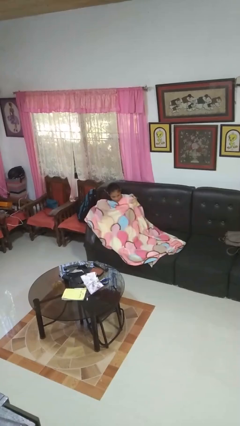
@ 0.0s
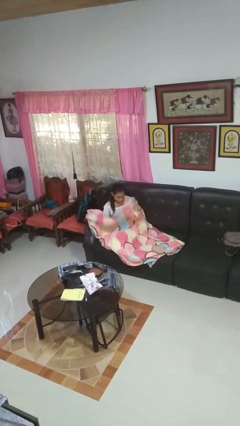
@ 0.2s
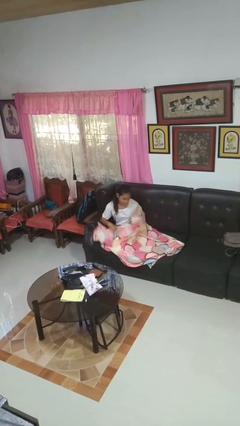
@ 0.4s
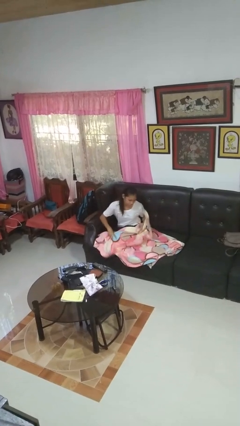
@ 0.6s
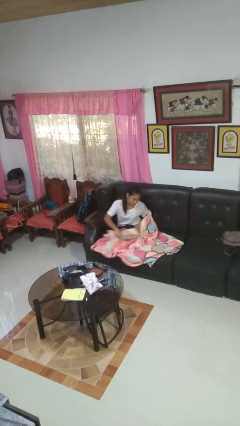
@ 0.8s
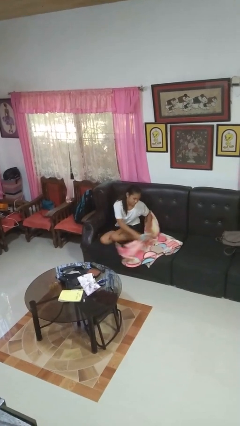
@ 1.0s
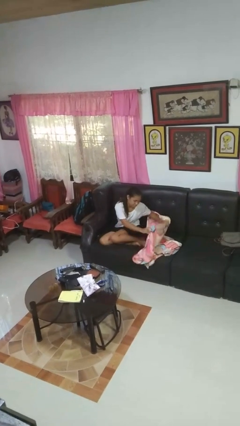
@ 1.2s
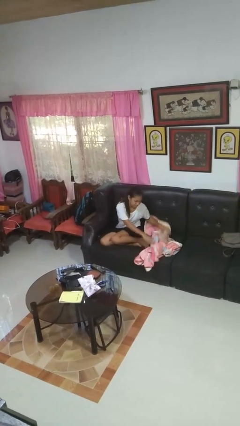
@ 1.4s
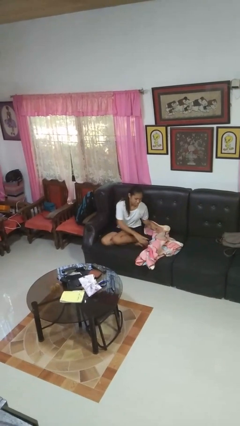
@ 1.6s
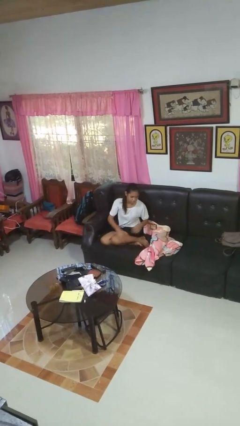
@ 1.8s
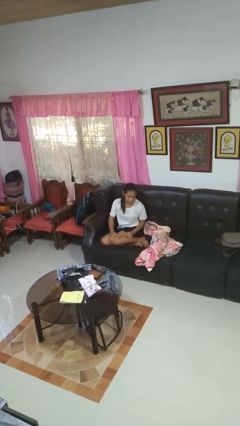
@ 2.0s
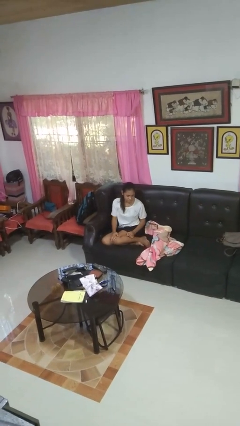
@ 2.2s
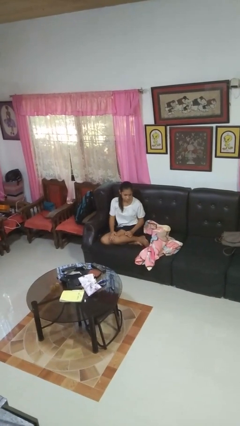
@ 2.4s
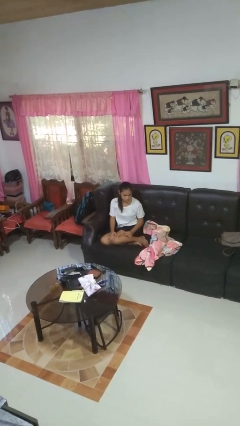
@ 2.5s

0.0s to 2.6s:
person uncovers with blanket

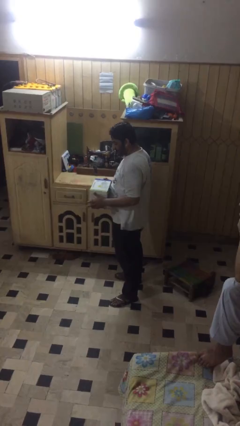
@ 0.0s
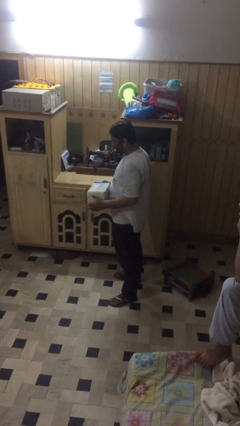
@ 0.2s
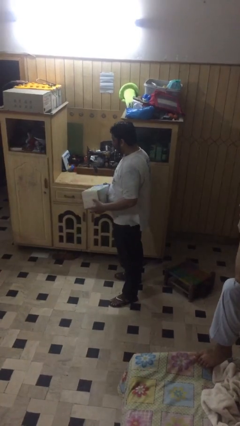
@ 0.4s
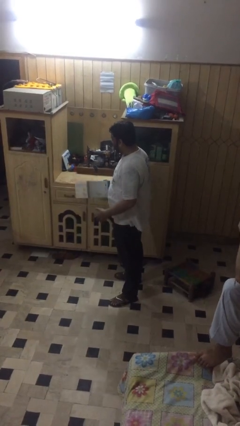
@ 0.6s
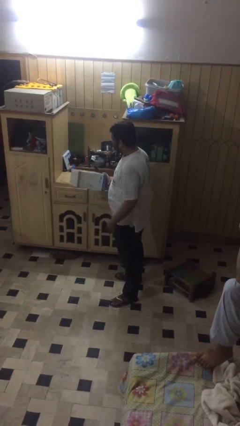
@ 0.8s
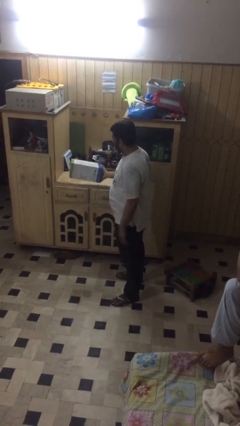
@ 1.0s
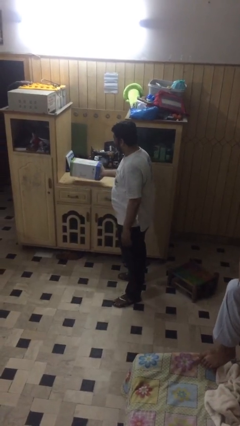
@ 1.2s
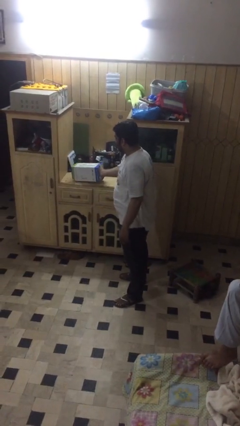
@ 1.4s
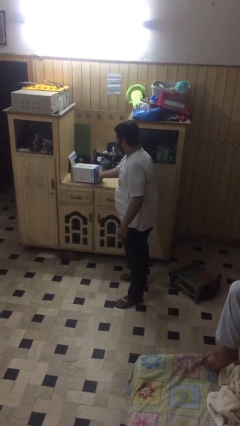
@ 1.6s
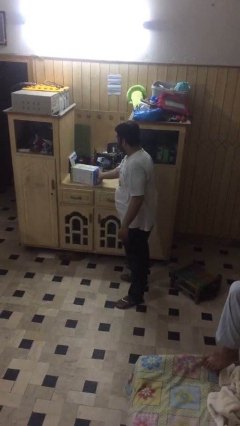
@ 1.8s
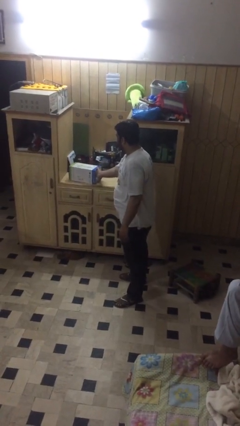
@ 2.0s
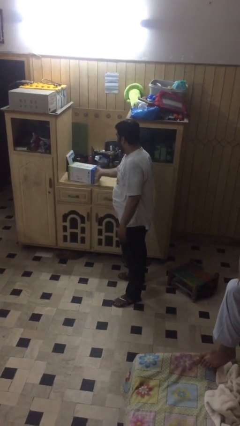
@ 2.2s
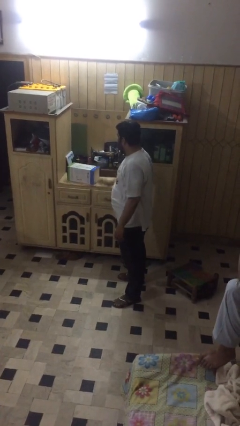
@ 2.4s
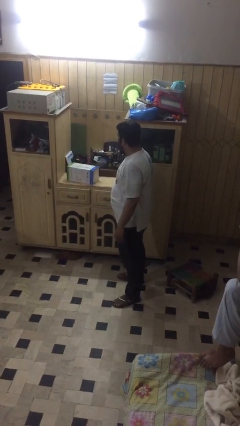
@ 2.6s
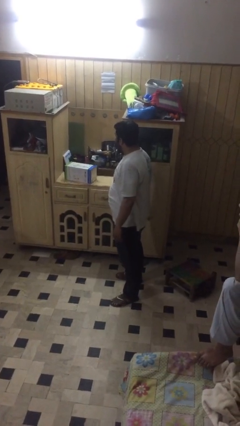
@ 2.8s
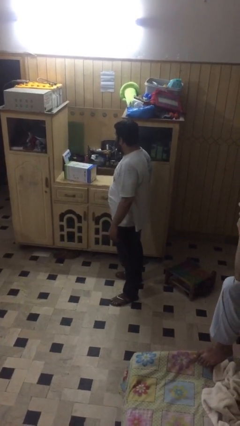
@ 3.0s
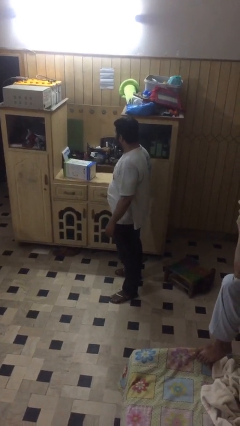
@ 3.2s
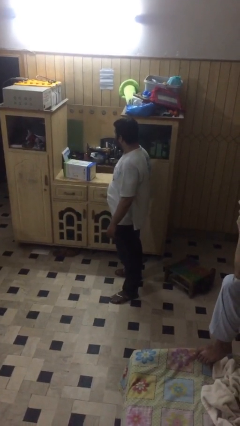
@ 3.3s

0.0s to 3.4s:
person puts down object on table

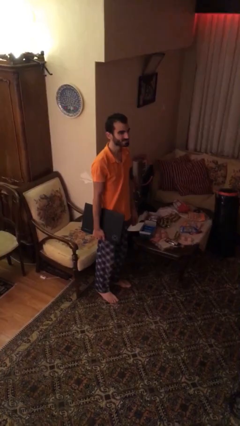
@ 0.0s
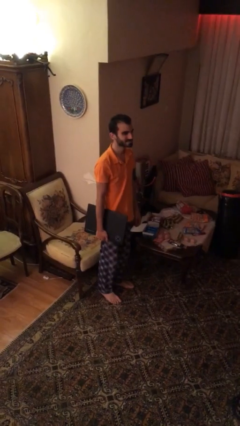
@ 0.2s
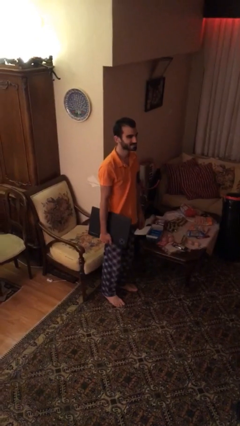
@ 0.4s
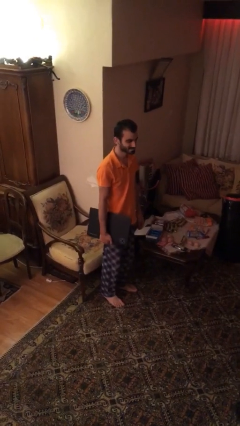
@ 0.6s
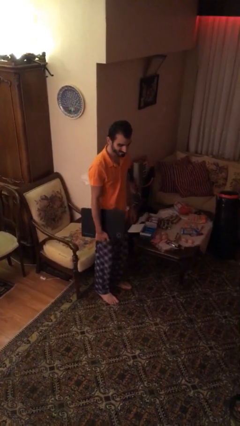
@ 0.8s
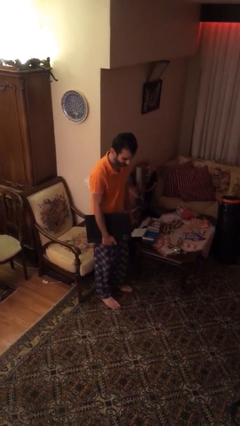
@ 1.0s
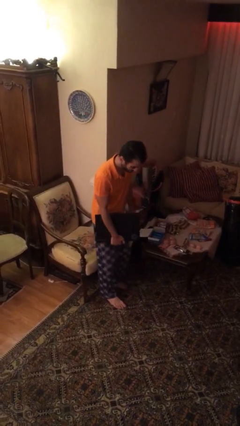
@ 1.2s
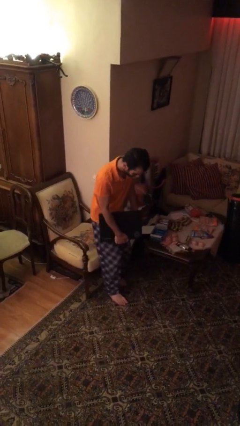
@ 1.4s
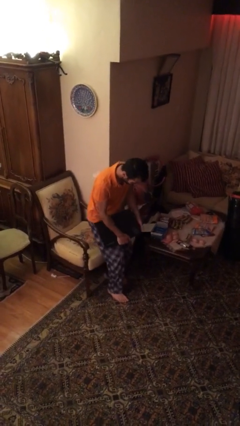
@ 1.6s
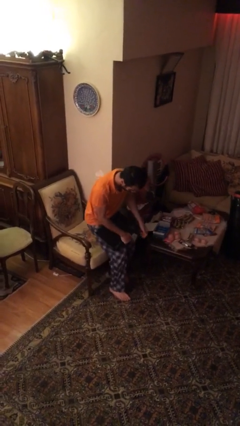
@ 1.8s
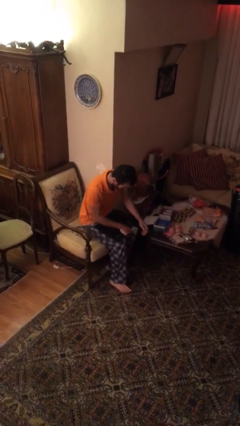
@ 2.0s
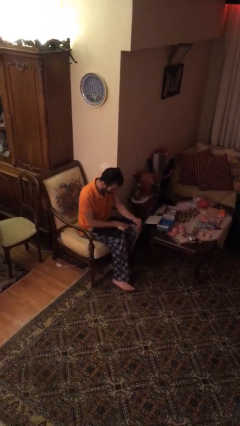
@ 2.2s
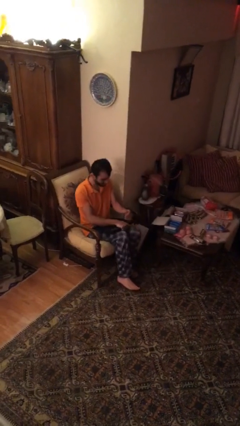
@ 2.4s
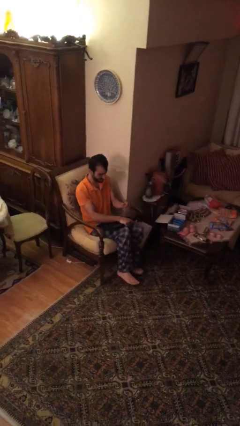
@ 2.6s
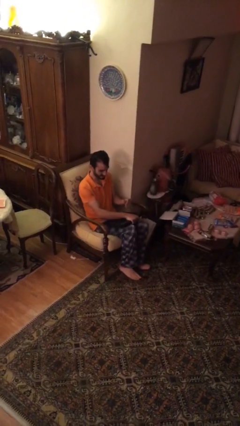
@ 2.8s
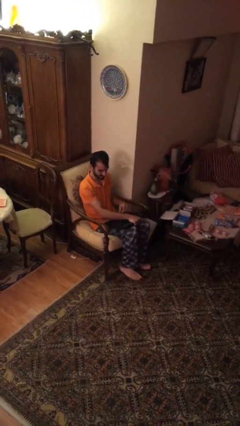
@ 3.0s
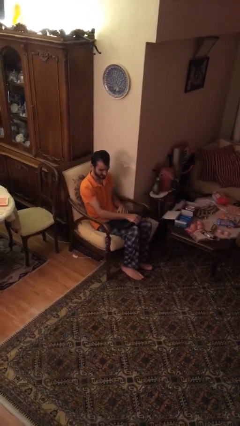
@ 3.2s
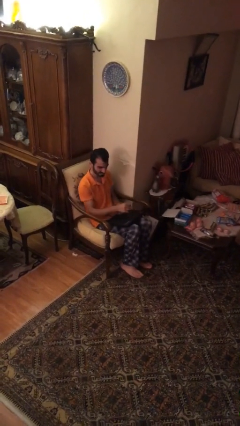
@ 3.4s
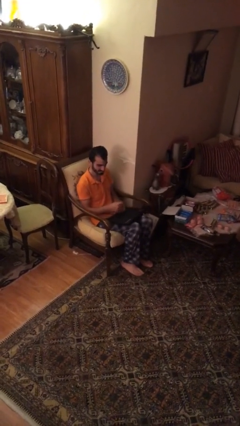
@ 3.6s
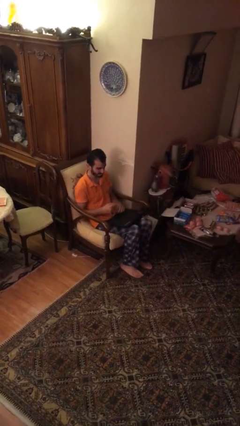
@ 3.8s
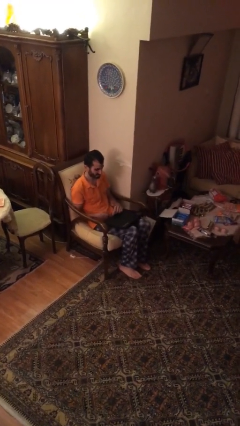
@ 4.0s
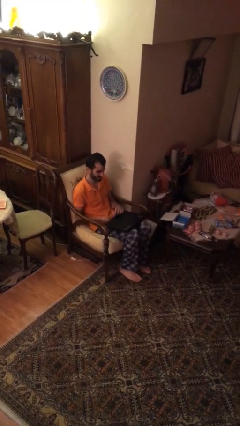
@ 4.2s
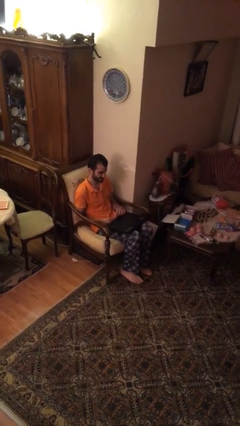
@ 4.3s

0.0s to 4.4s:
person sits down

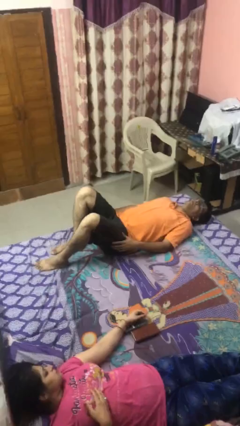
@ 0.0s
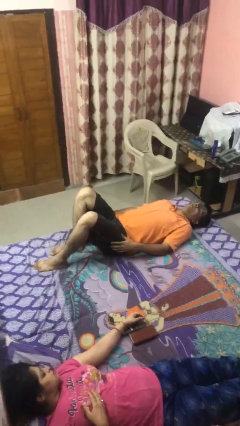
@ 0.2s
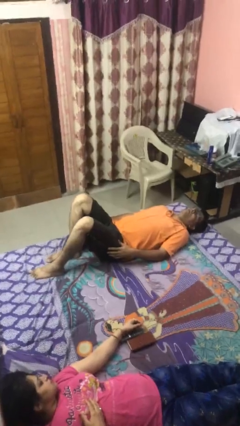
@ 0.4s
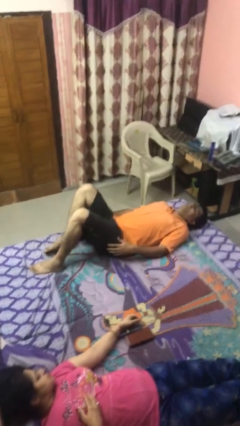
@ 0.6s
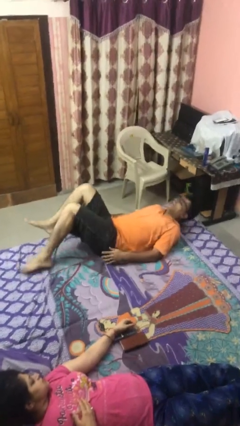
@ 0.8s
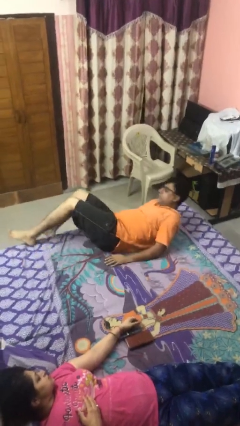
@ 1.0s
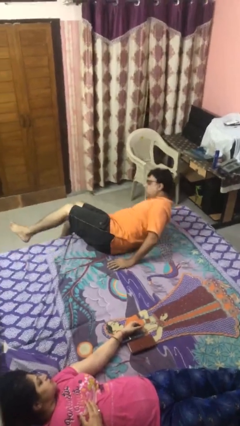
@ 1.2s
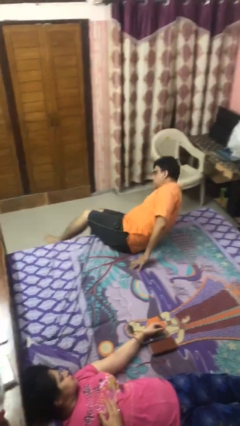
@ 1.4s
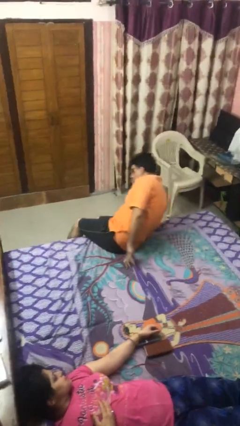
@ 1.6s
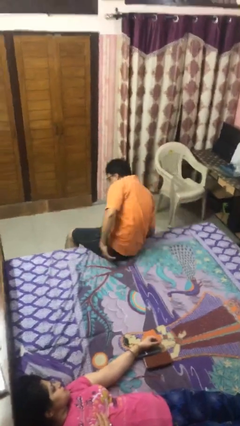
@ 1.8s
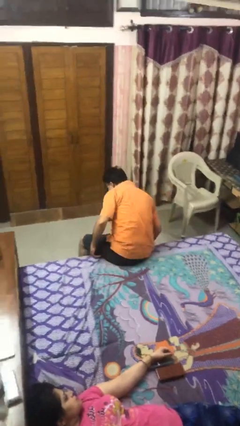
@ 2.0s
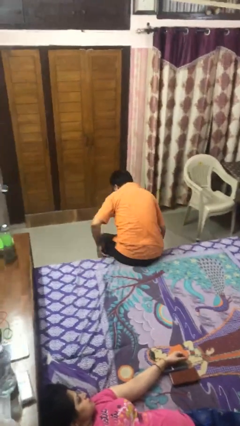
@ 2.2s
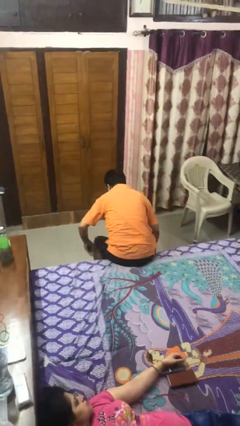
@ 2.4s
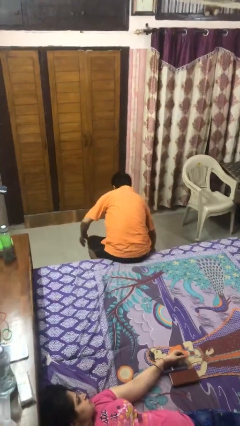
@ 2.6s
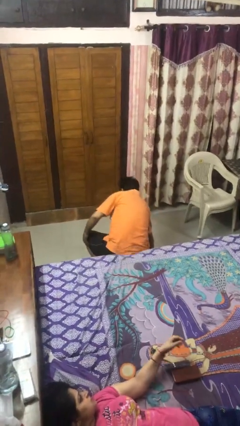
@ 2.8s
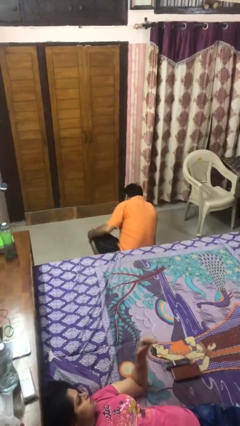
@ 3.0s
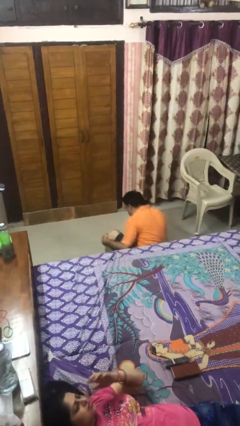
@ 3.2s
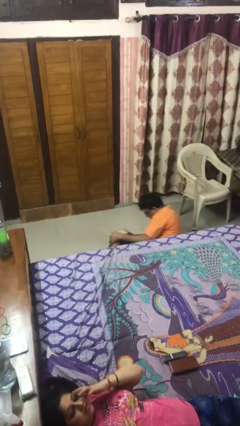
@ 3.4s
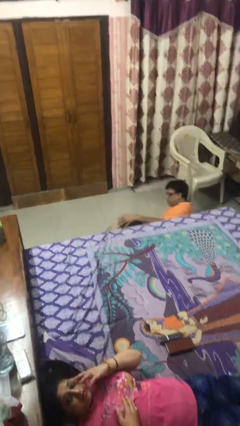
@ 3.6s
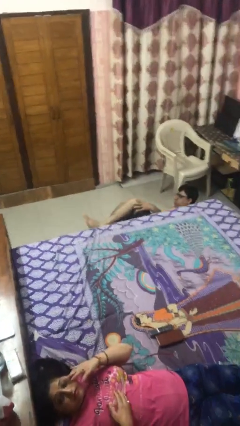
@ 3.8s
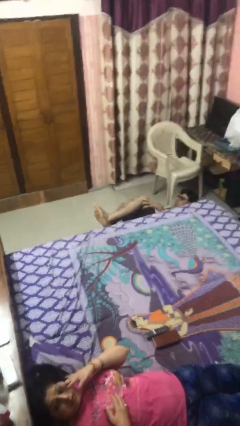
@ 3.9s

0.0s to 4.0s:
person falls from bed

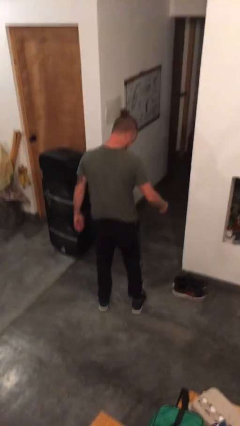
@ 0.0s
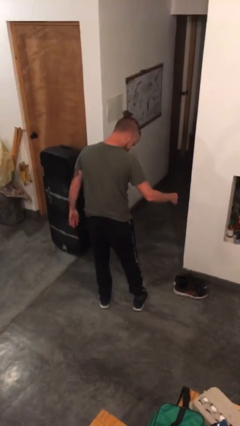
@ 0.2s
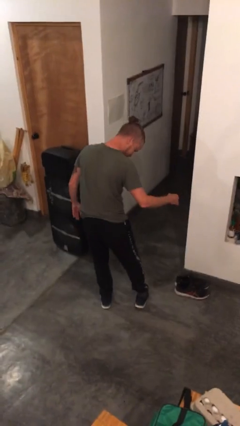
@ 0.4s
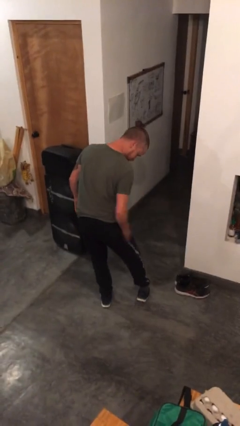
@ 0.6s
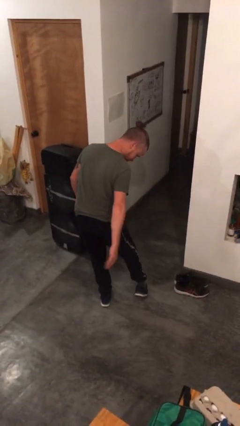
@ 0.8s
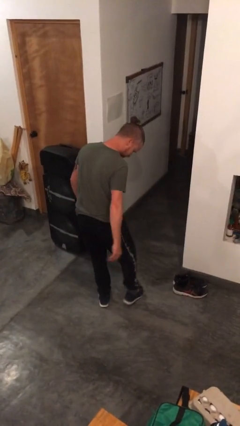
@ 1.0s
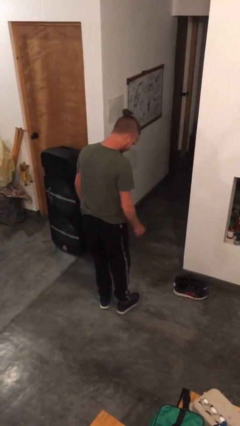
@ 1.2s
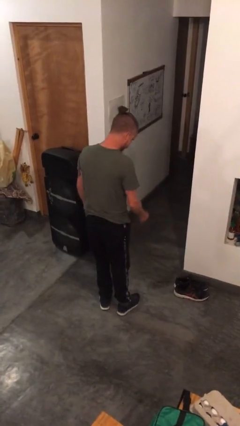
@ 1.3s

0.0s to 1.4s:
person swats bug

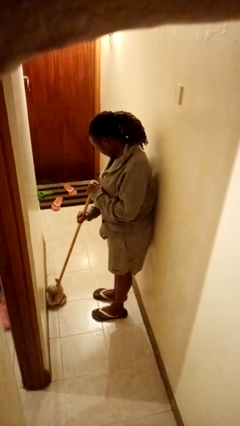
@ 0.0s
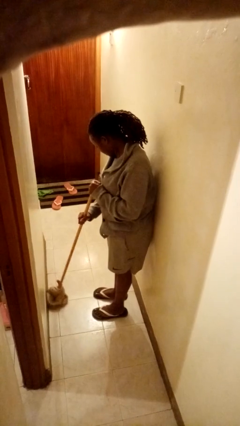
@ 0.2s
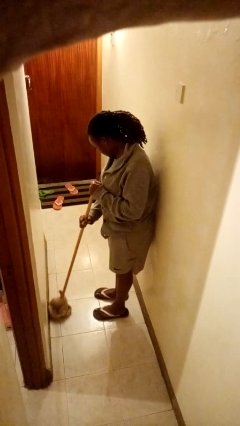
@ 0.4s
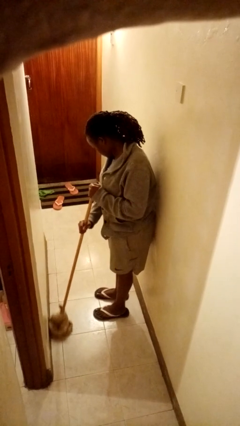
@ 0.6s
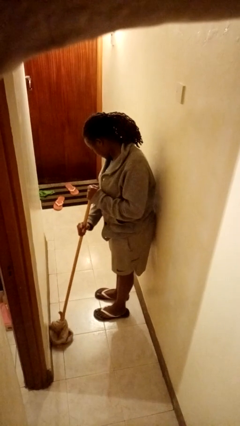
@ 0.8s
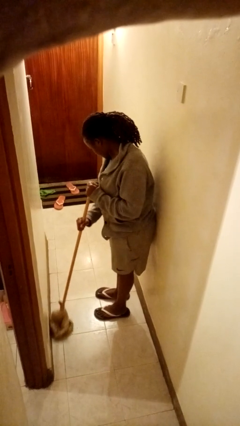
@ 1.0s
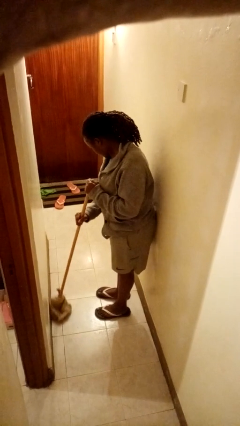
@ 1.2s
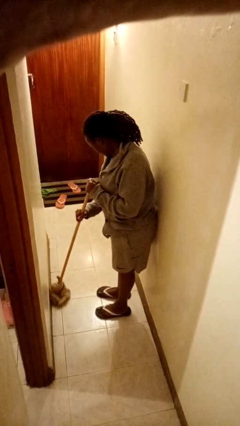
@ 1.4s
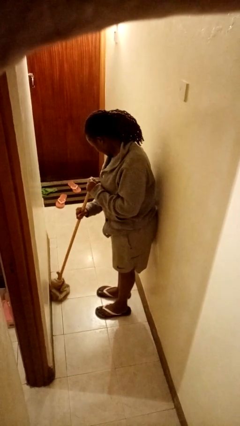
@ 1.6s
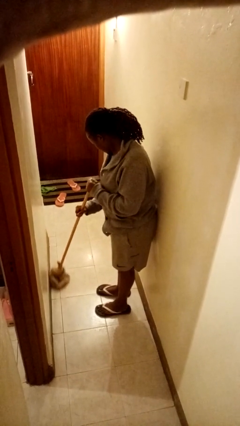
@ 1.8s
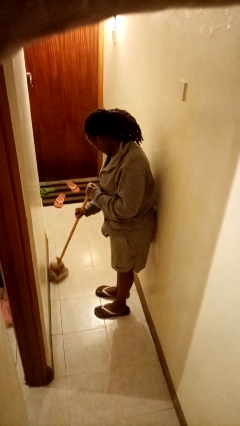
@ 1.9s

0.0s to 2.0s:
person mops
